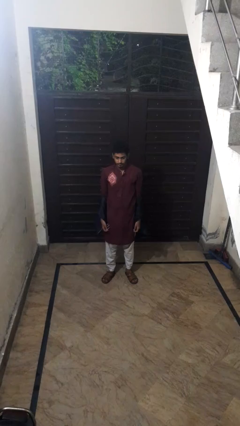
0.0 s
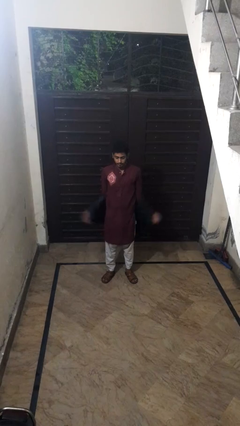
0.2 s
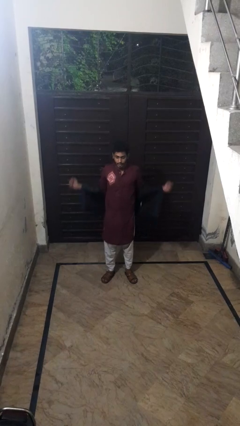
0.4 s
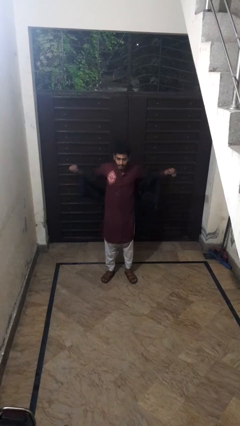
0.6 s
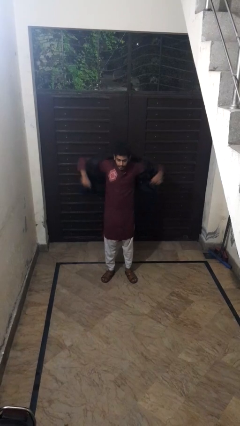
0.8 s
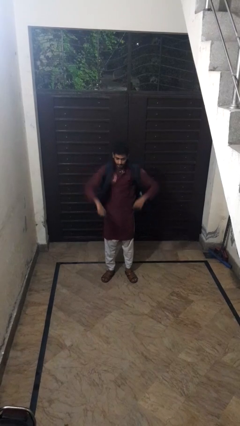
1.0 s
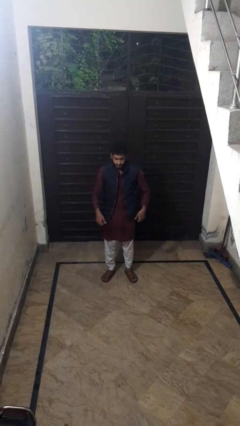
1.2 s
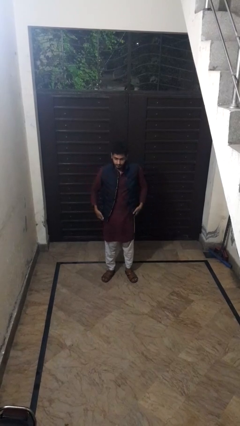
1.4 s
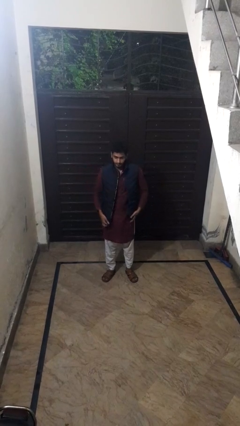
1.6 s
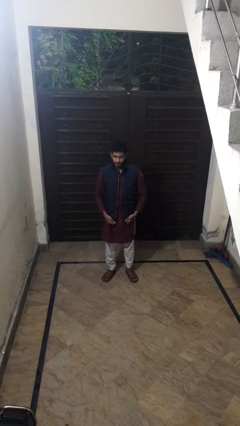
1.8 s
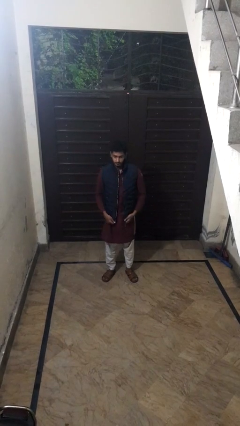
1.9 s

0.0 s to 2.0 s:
person puts on jacket

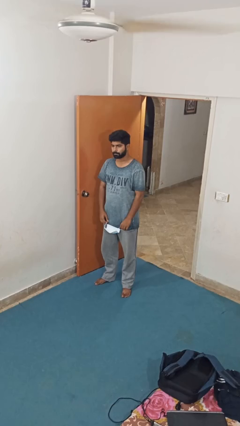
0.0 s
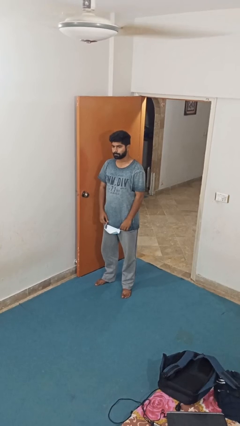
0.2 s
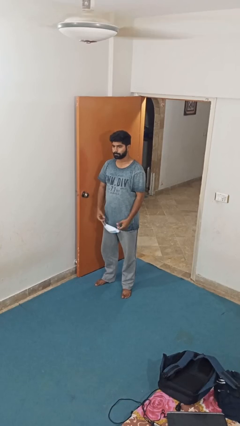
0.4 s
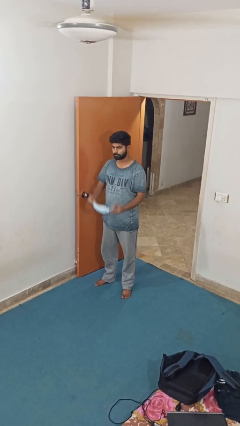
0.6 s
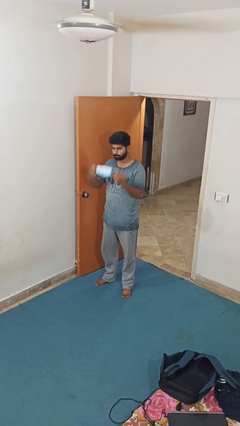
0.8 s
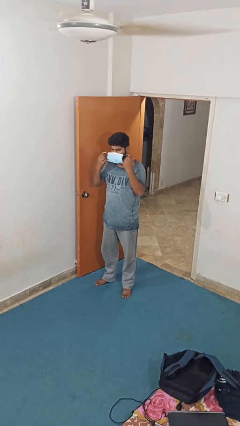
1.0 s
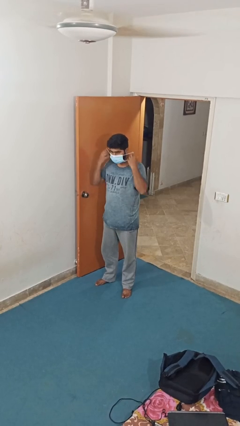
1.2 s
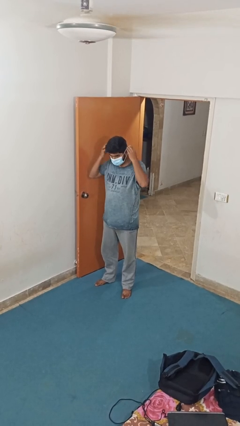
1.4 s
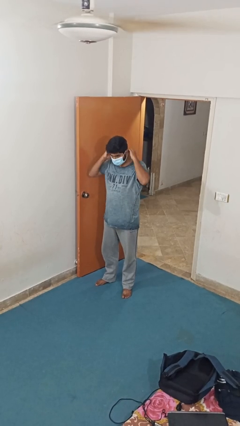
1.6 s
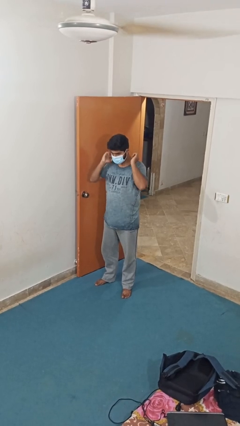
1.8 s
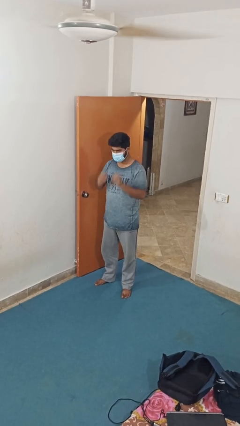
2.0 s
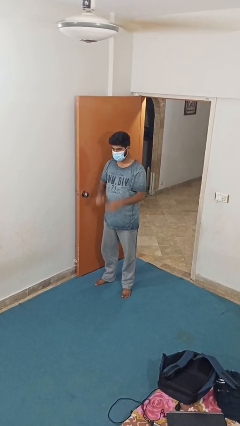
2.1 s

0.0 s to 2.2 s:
person puts on facemask

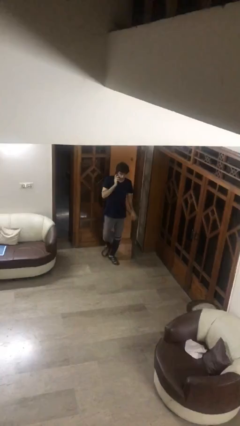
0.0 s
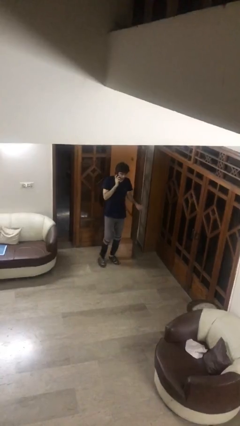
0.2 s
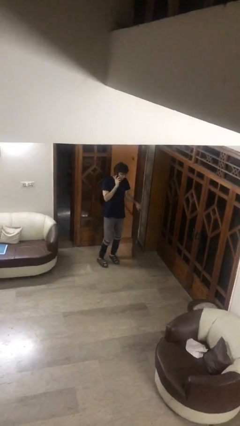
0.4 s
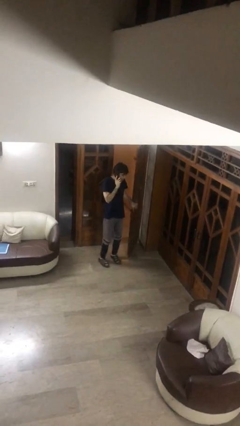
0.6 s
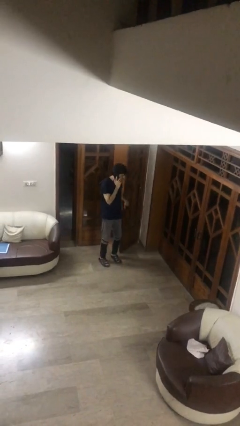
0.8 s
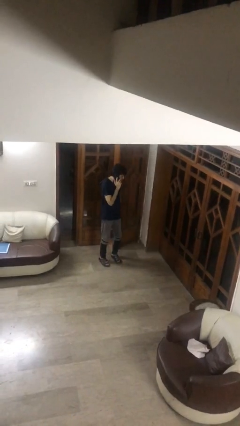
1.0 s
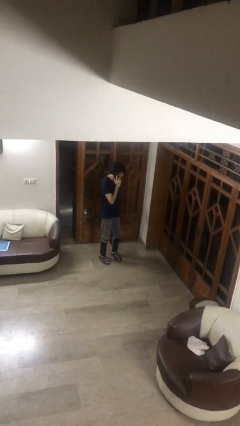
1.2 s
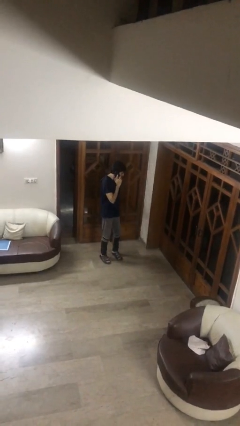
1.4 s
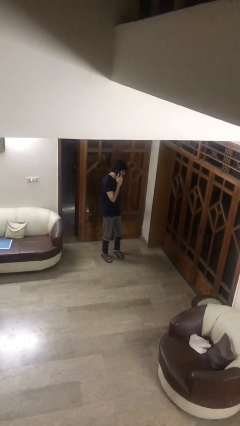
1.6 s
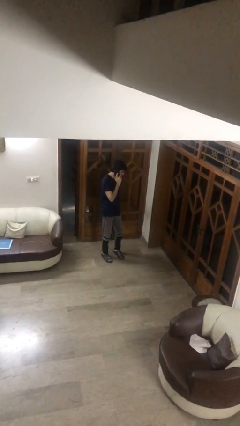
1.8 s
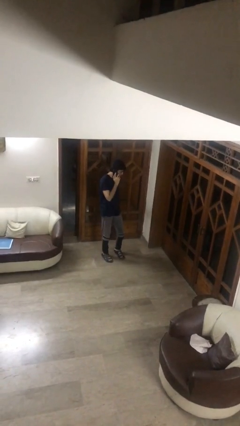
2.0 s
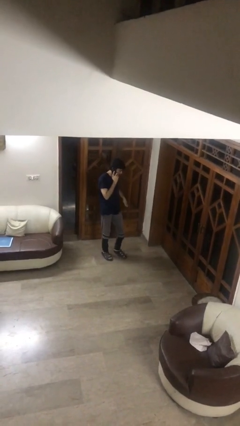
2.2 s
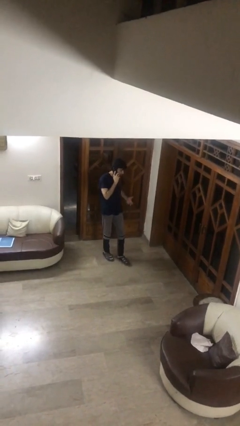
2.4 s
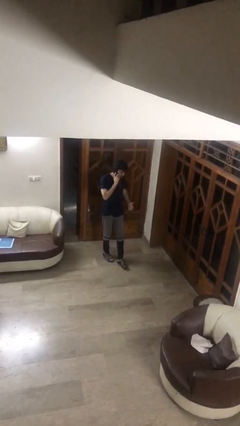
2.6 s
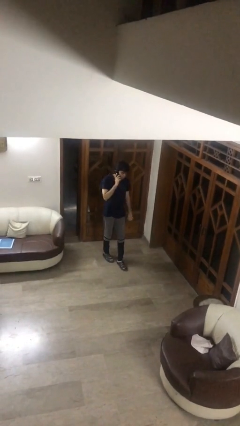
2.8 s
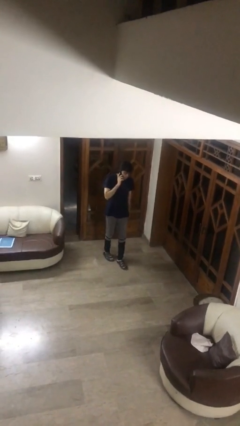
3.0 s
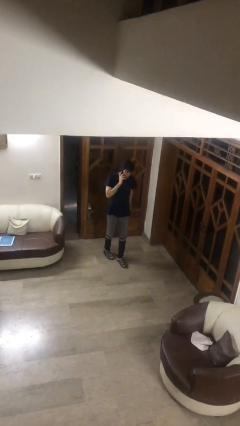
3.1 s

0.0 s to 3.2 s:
person closes facility door

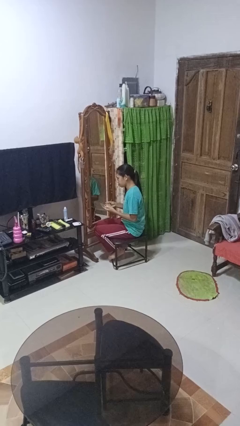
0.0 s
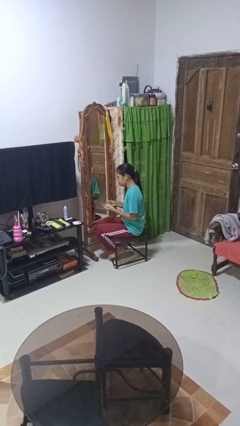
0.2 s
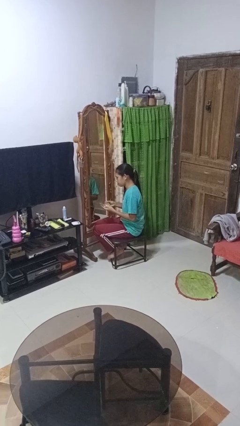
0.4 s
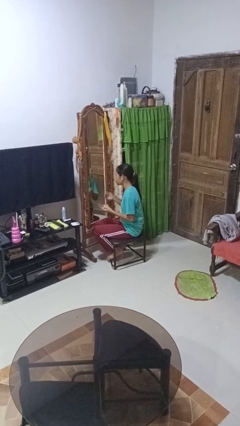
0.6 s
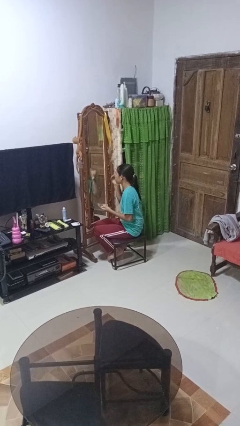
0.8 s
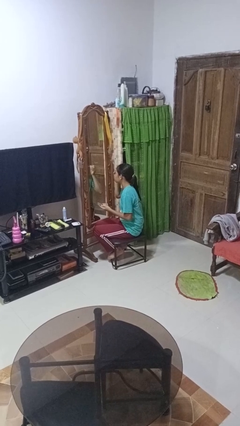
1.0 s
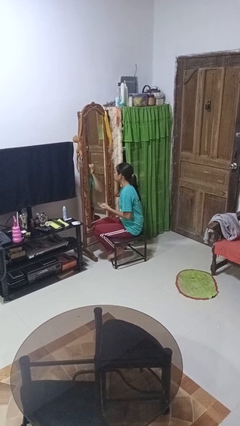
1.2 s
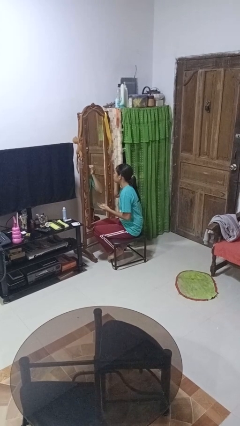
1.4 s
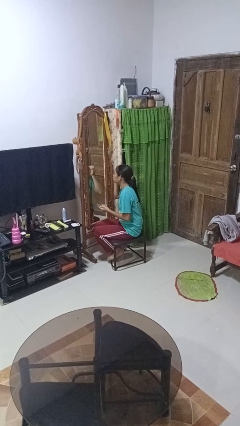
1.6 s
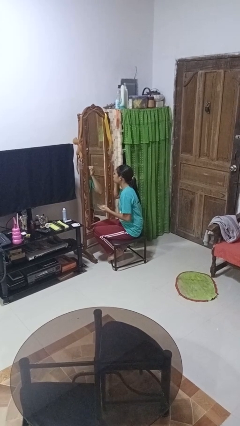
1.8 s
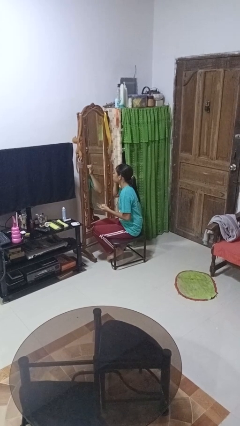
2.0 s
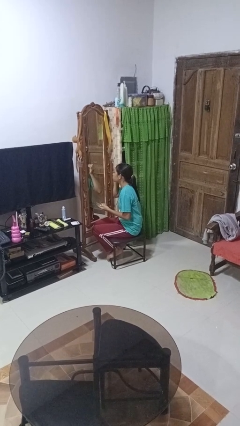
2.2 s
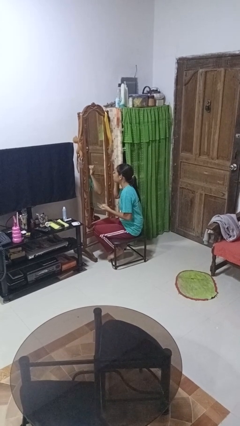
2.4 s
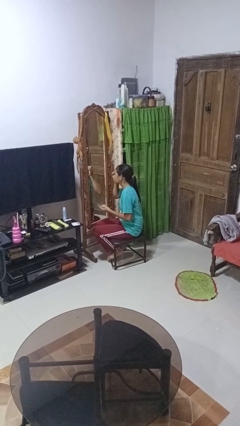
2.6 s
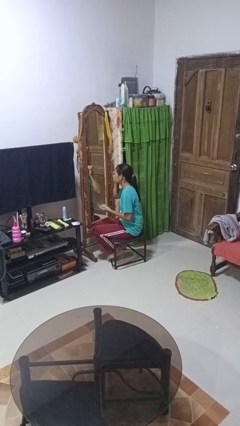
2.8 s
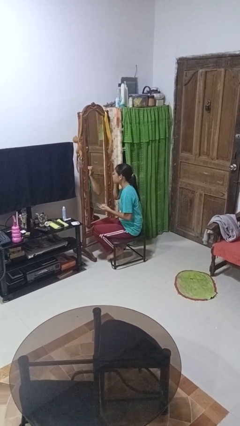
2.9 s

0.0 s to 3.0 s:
person applies eye makeup

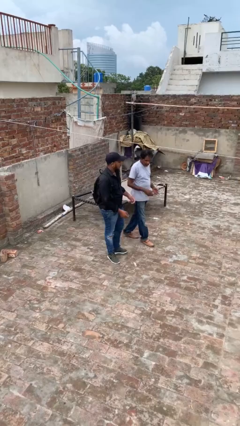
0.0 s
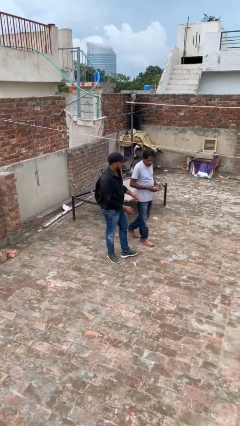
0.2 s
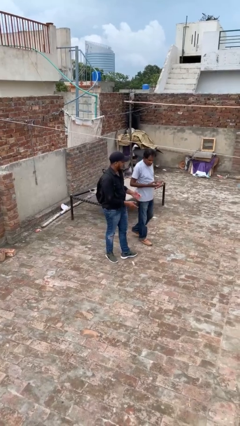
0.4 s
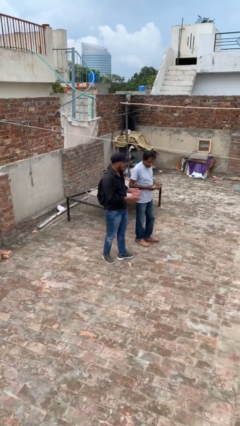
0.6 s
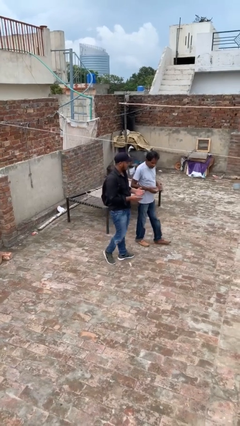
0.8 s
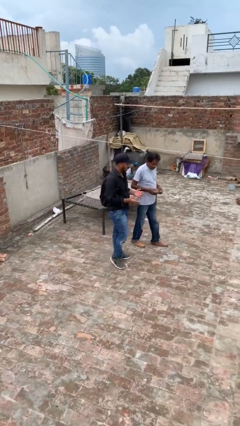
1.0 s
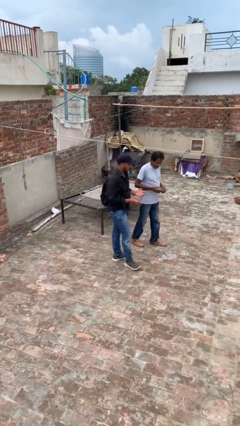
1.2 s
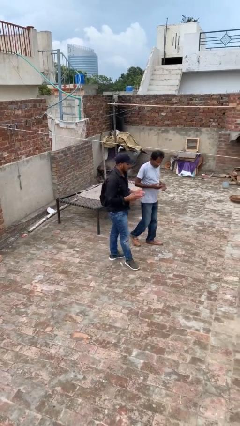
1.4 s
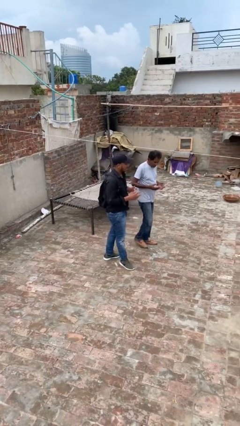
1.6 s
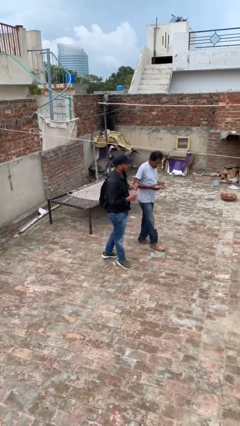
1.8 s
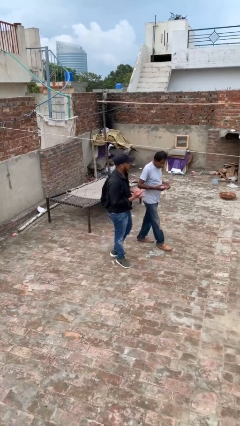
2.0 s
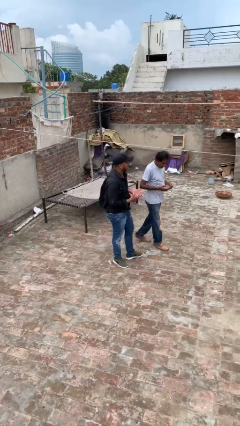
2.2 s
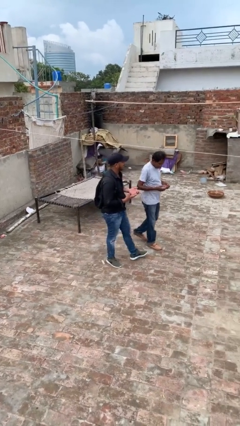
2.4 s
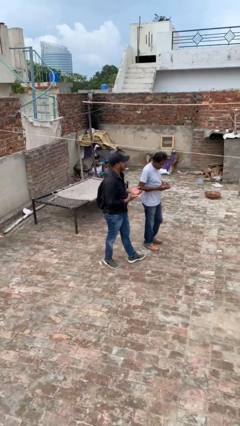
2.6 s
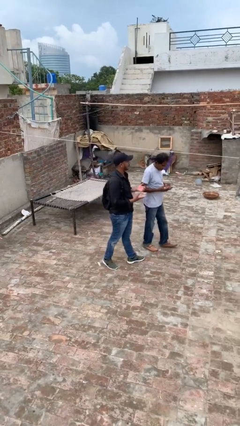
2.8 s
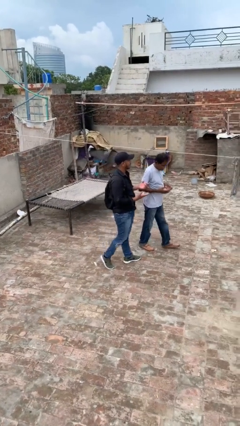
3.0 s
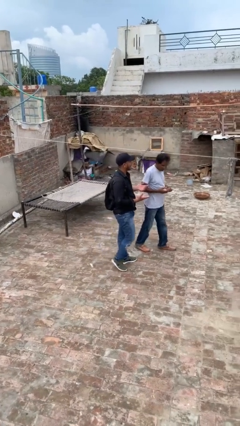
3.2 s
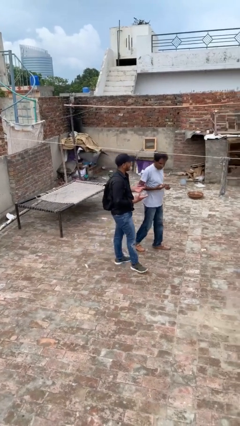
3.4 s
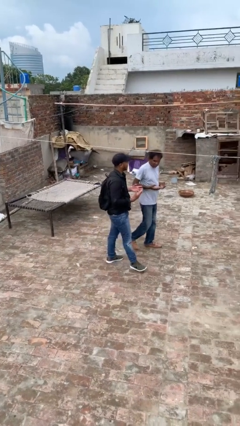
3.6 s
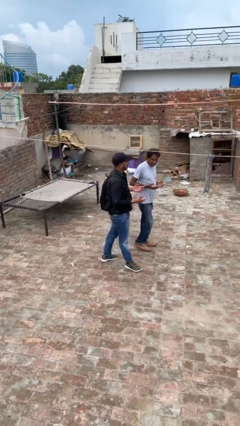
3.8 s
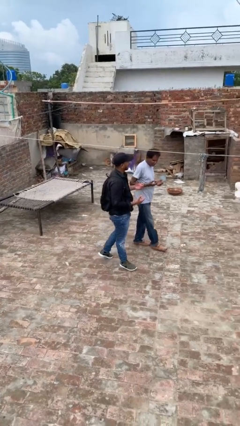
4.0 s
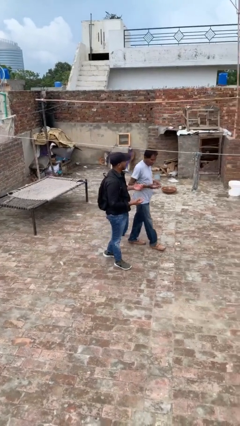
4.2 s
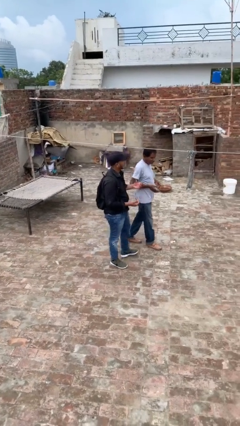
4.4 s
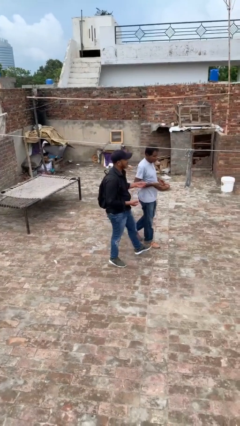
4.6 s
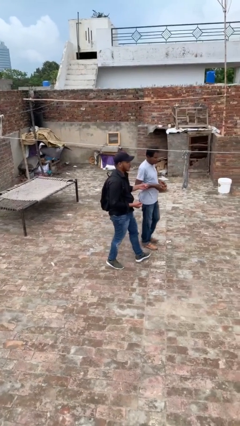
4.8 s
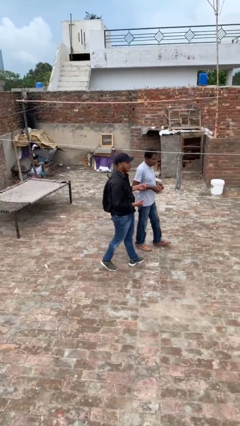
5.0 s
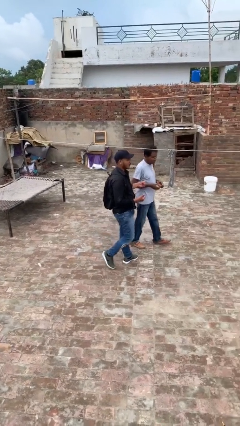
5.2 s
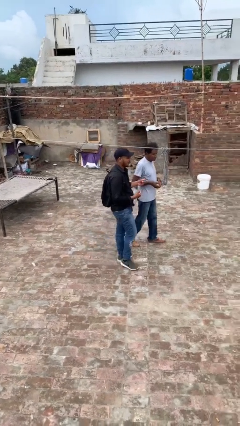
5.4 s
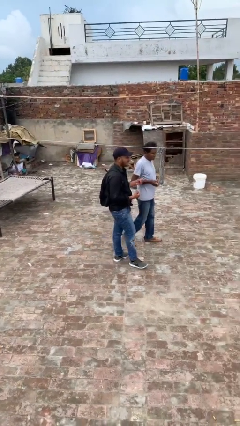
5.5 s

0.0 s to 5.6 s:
person talks to person

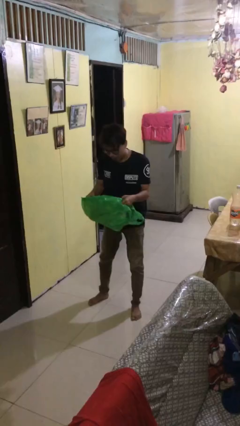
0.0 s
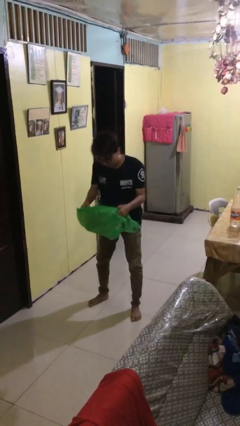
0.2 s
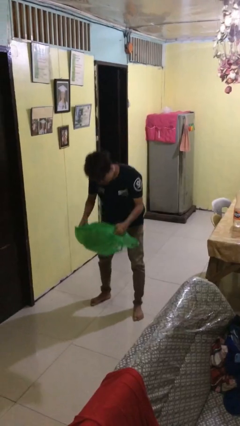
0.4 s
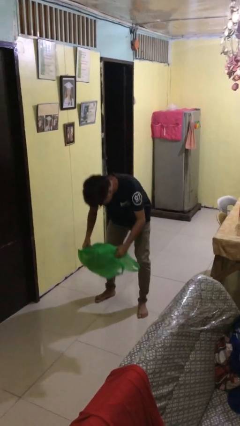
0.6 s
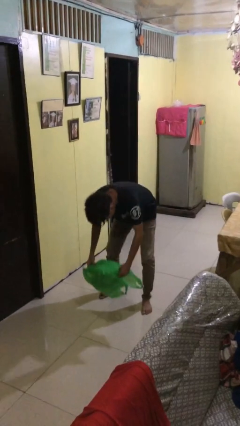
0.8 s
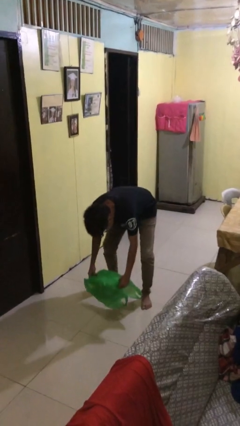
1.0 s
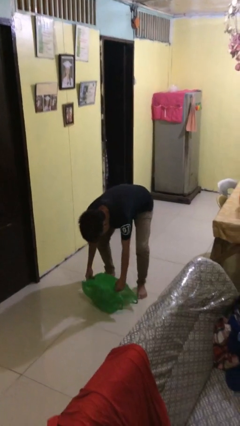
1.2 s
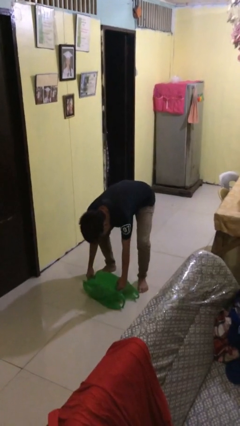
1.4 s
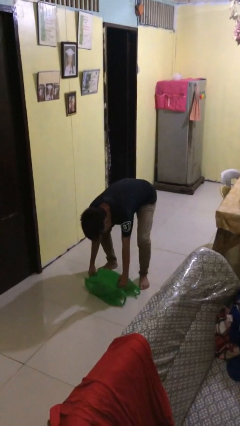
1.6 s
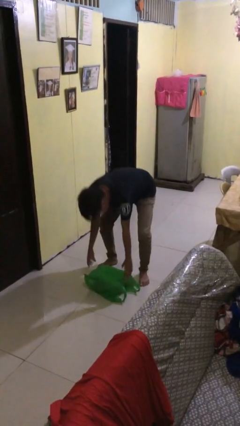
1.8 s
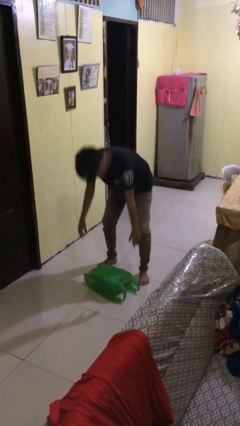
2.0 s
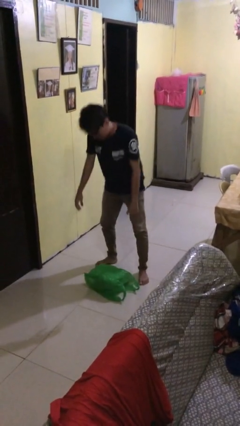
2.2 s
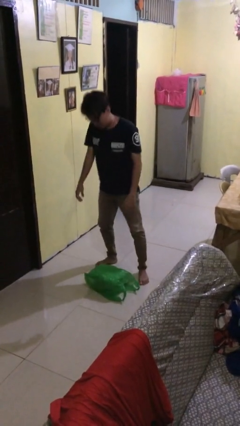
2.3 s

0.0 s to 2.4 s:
person puts down object on floor
